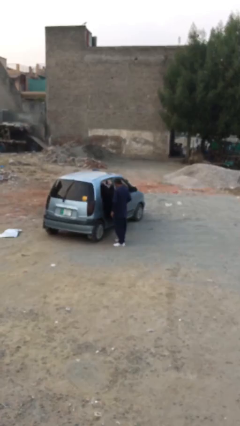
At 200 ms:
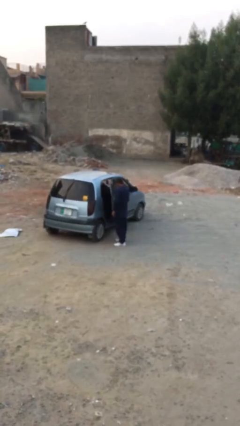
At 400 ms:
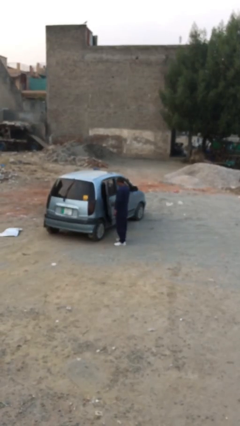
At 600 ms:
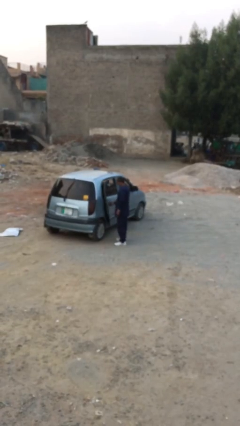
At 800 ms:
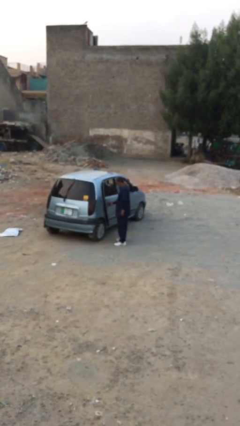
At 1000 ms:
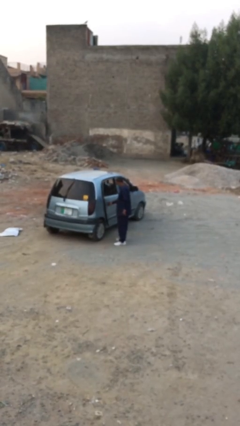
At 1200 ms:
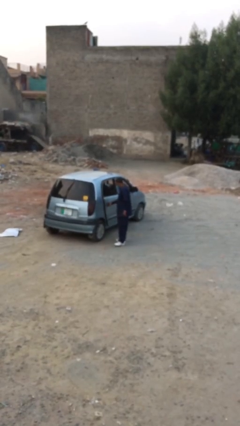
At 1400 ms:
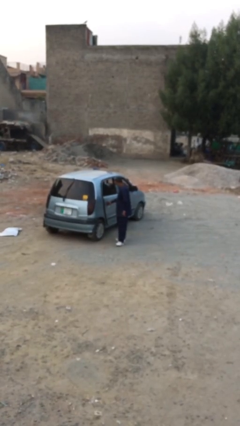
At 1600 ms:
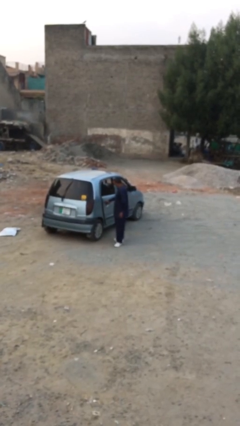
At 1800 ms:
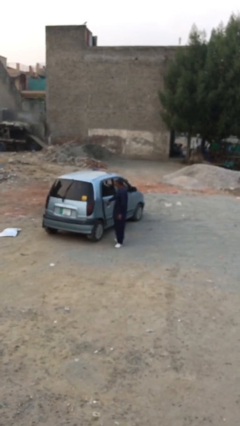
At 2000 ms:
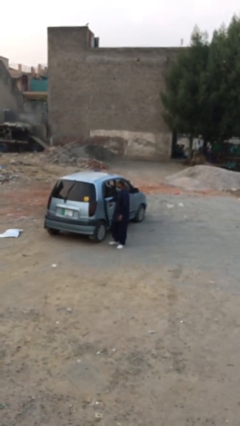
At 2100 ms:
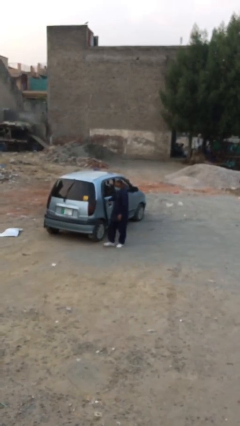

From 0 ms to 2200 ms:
person closes car door

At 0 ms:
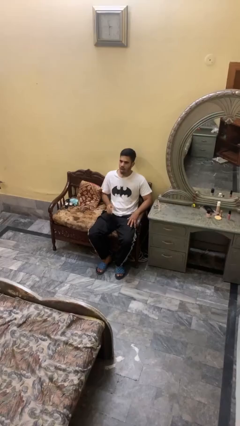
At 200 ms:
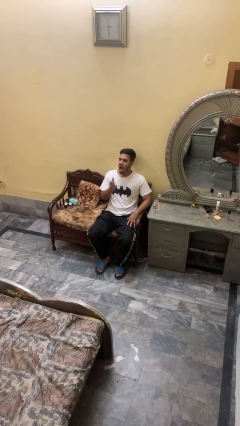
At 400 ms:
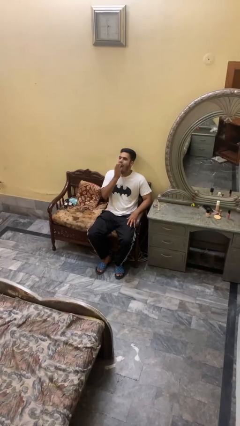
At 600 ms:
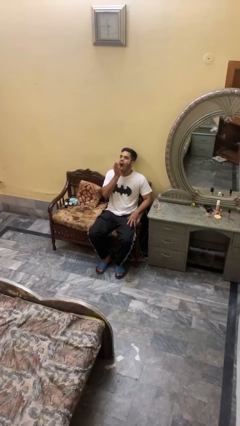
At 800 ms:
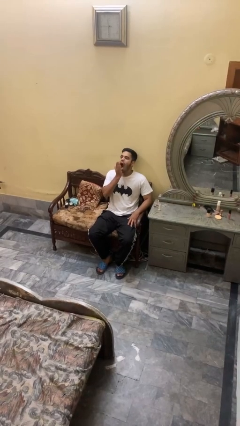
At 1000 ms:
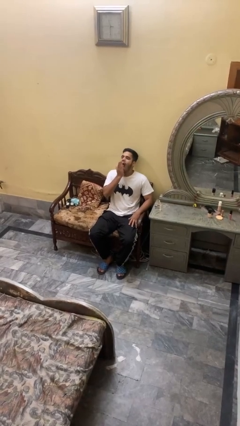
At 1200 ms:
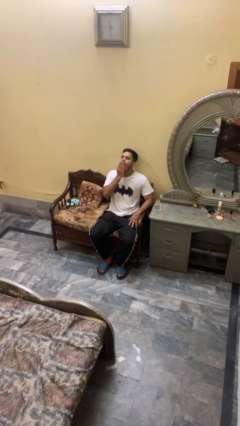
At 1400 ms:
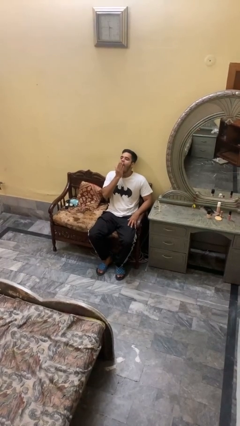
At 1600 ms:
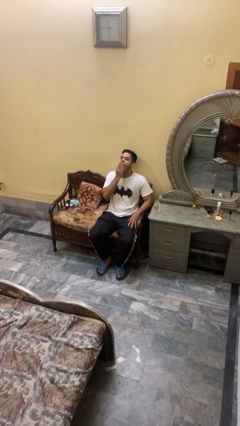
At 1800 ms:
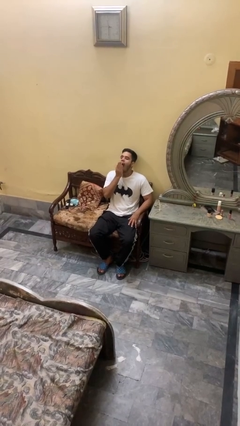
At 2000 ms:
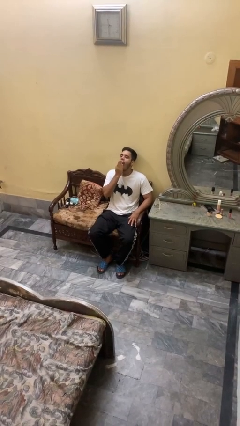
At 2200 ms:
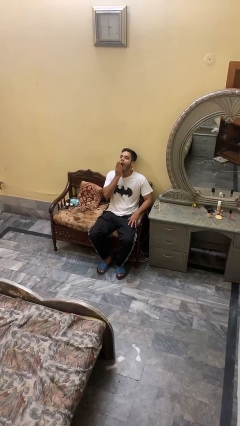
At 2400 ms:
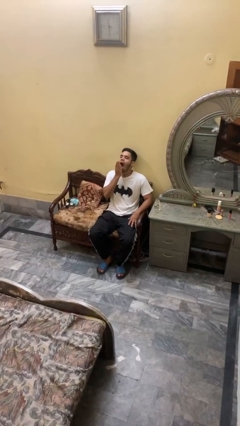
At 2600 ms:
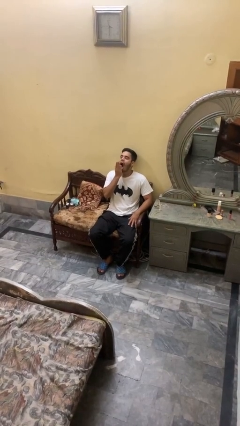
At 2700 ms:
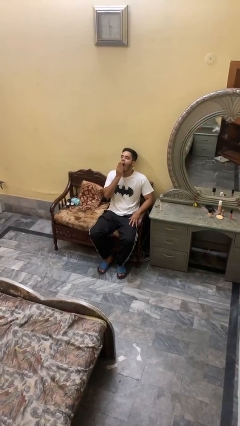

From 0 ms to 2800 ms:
person yawns

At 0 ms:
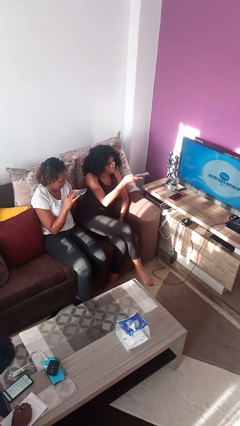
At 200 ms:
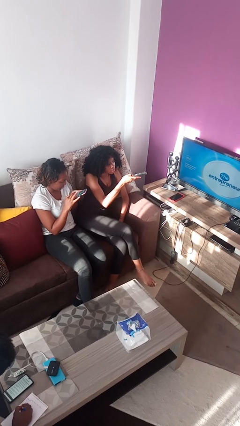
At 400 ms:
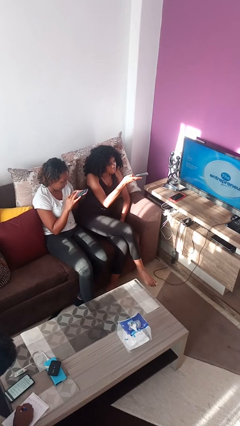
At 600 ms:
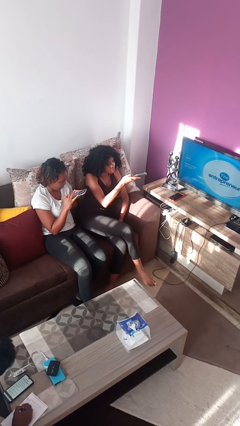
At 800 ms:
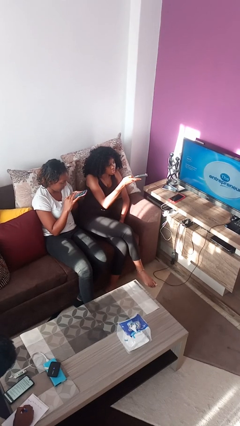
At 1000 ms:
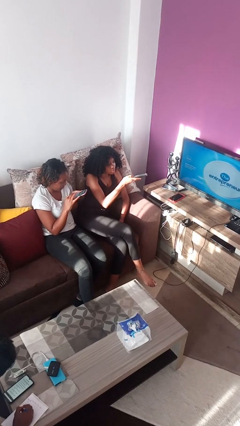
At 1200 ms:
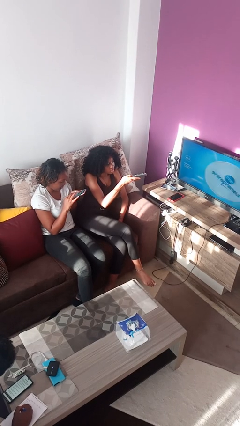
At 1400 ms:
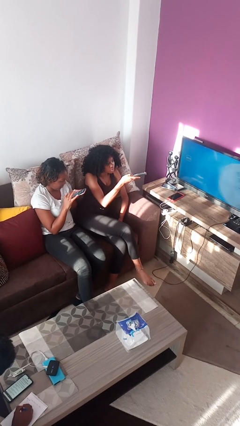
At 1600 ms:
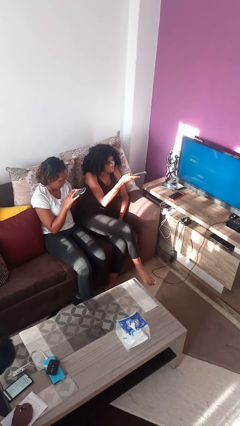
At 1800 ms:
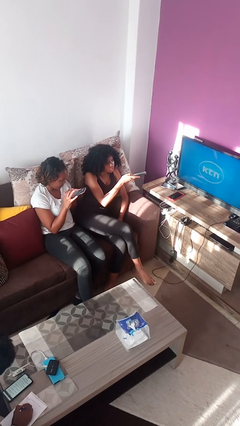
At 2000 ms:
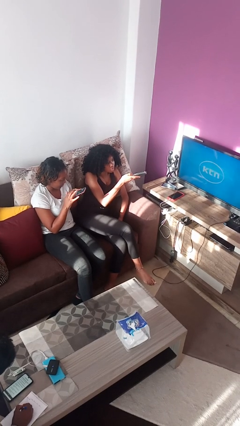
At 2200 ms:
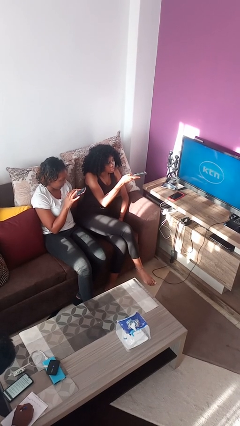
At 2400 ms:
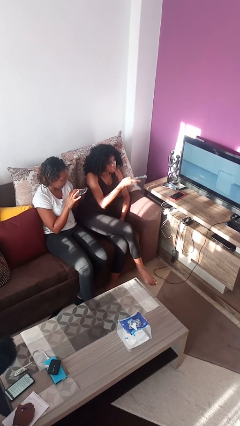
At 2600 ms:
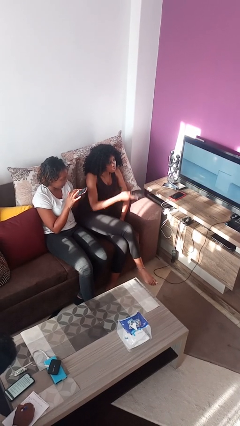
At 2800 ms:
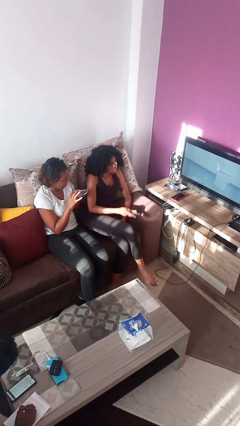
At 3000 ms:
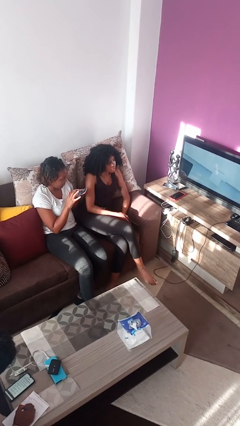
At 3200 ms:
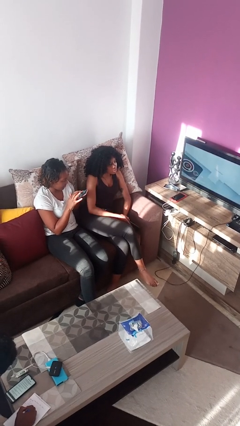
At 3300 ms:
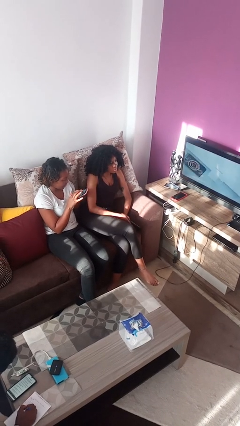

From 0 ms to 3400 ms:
person uses television remote

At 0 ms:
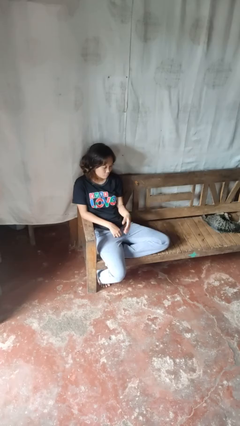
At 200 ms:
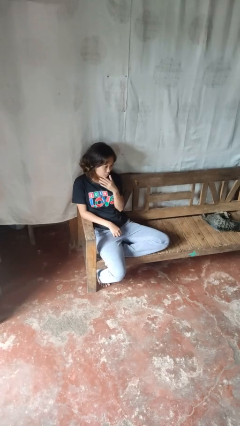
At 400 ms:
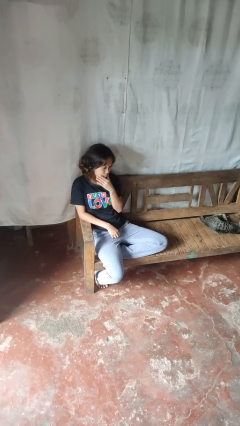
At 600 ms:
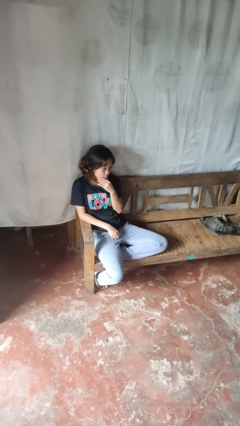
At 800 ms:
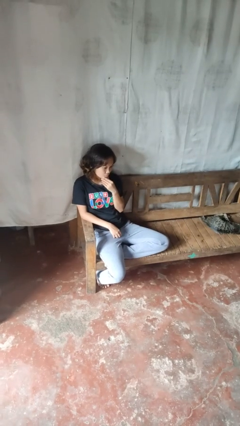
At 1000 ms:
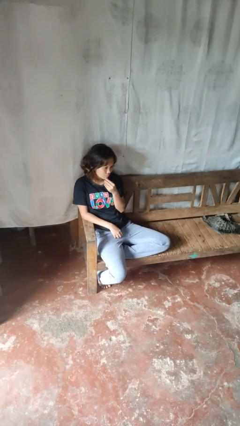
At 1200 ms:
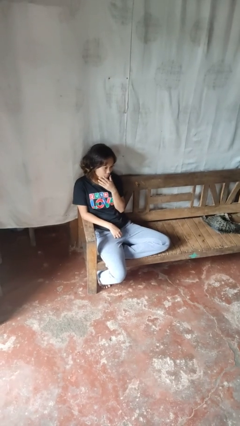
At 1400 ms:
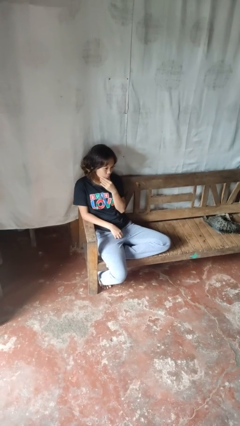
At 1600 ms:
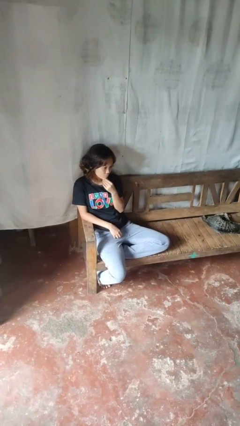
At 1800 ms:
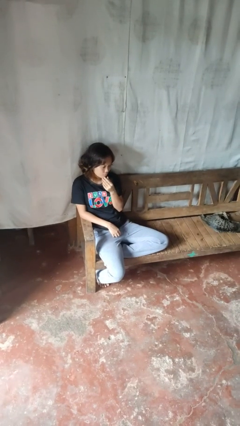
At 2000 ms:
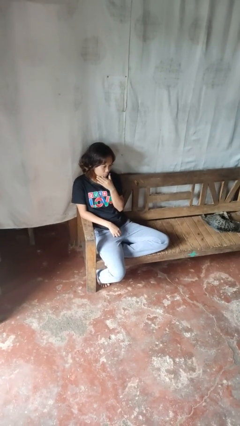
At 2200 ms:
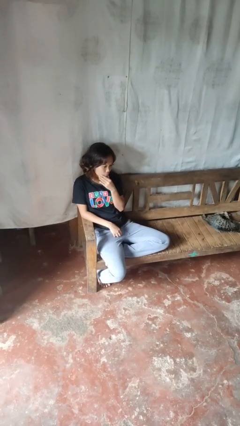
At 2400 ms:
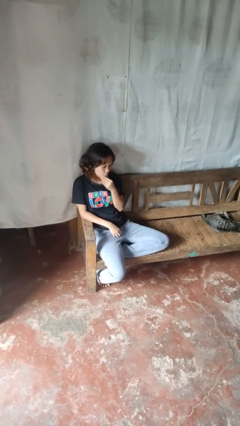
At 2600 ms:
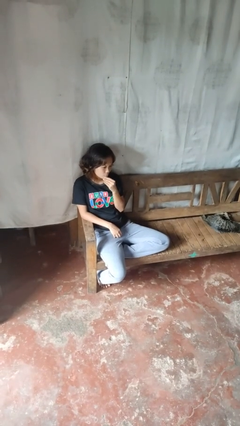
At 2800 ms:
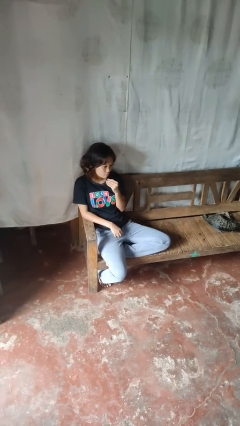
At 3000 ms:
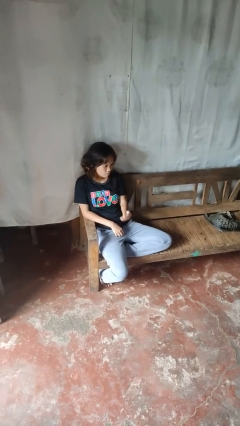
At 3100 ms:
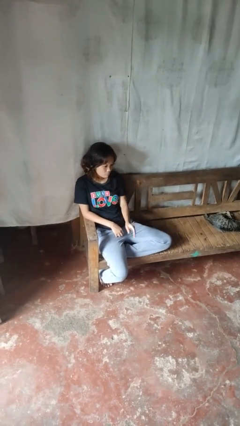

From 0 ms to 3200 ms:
person strokes chin

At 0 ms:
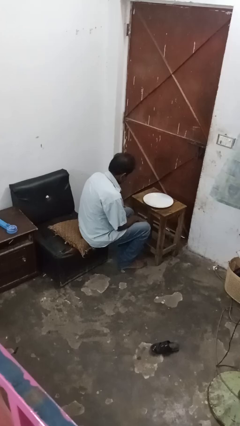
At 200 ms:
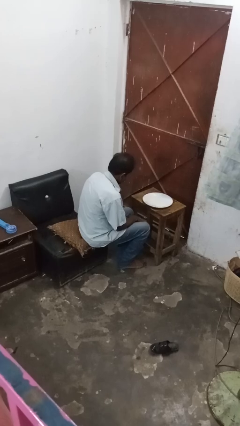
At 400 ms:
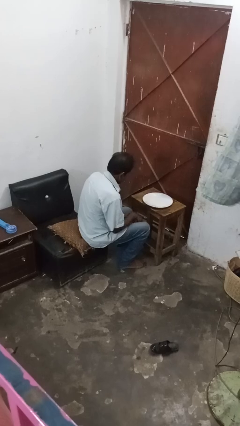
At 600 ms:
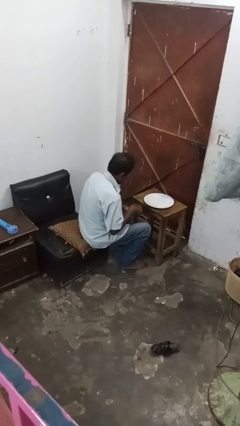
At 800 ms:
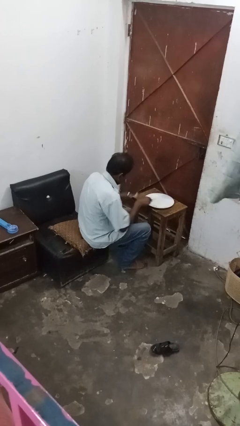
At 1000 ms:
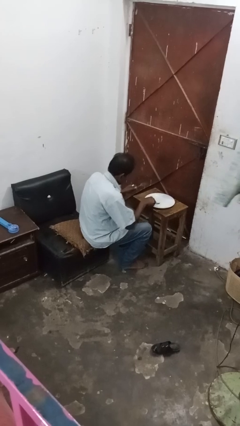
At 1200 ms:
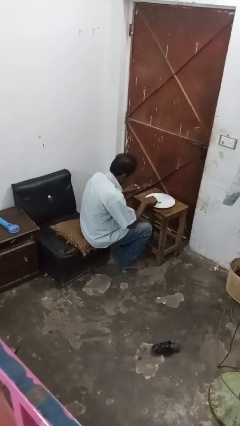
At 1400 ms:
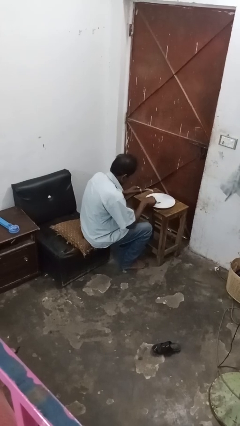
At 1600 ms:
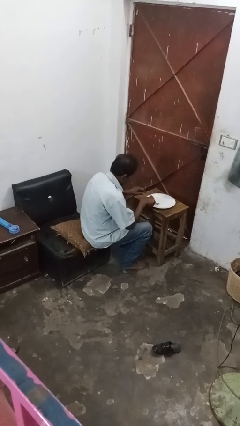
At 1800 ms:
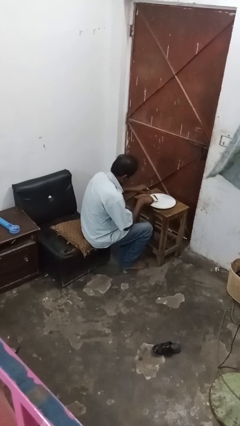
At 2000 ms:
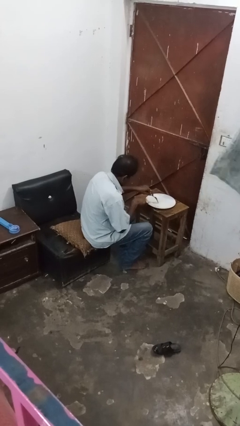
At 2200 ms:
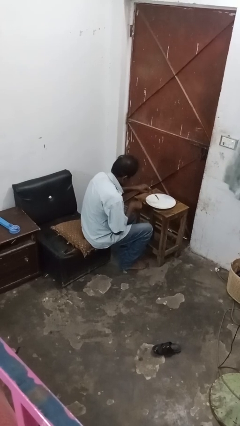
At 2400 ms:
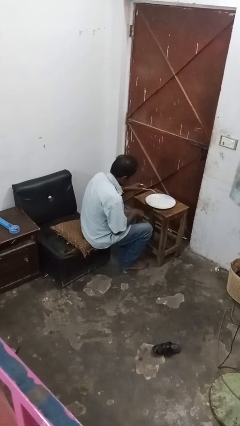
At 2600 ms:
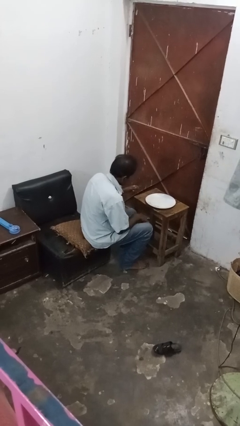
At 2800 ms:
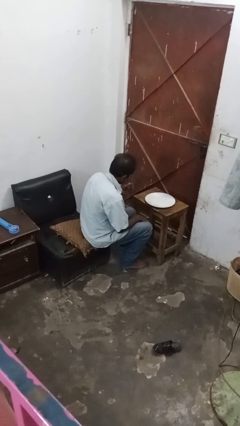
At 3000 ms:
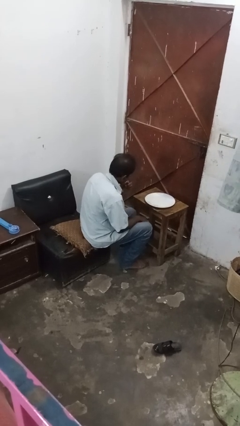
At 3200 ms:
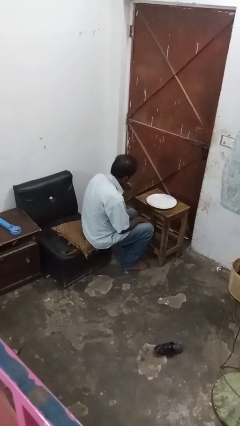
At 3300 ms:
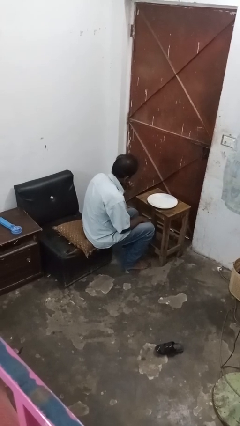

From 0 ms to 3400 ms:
person eats with utensil

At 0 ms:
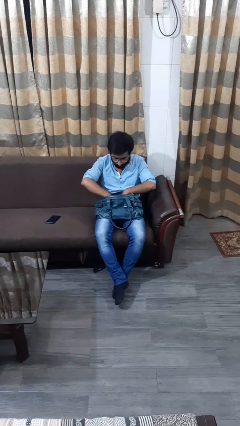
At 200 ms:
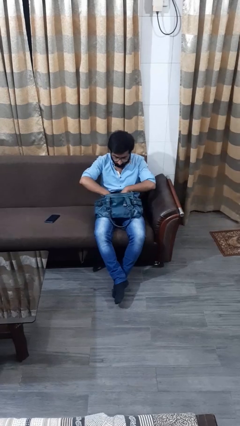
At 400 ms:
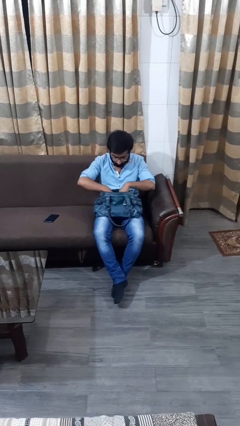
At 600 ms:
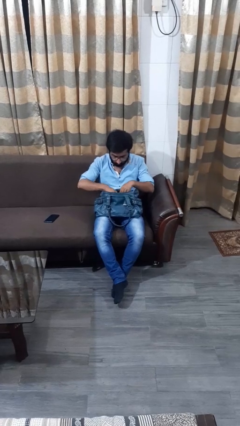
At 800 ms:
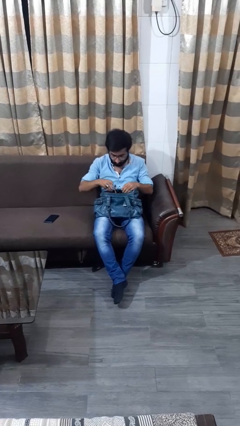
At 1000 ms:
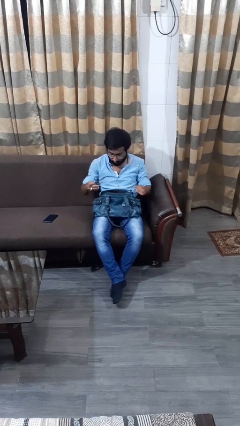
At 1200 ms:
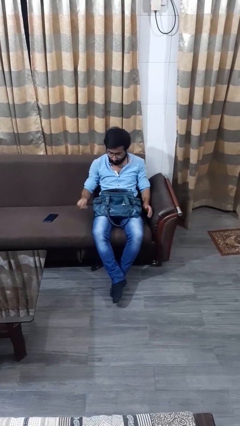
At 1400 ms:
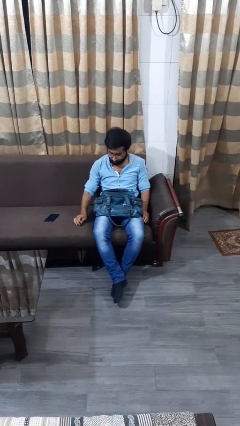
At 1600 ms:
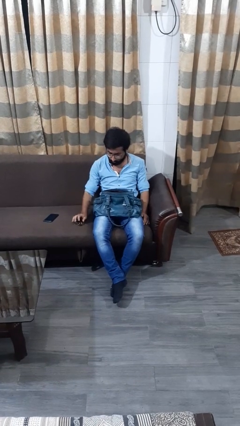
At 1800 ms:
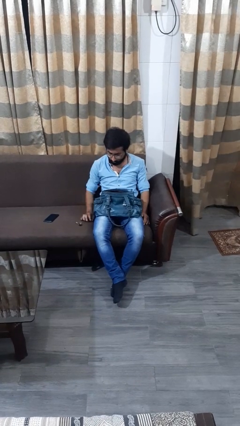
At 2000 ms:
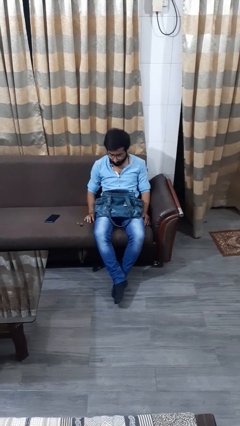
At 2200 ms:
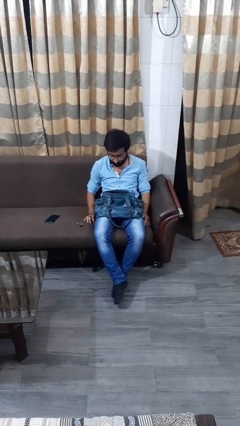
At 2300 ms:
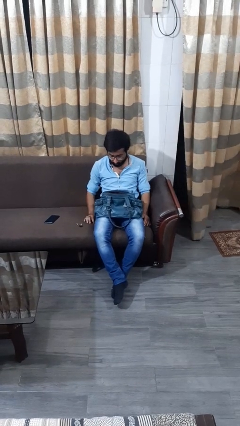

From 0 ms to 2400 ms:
person takes object from purse
